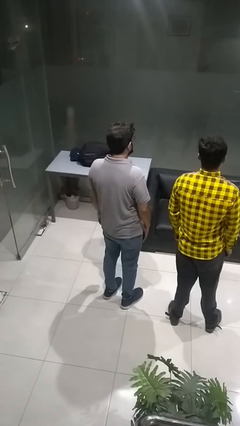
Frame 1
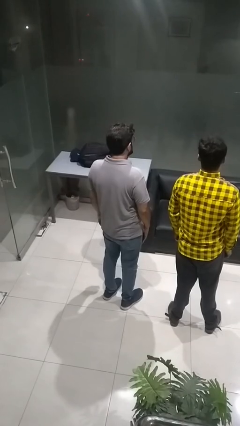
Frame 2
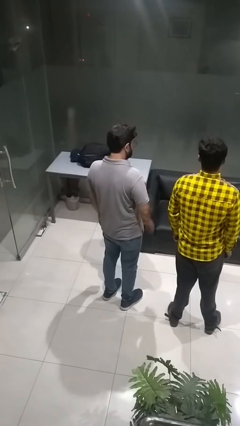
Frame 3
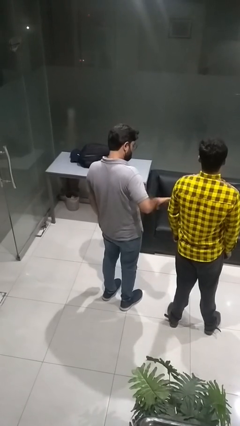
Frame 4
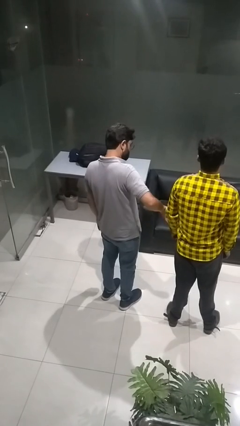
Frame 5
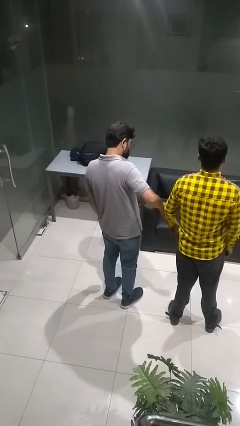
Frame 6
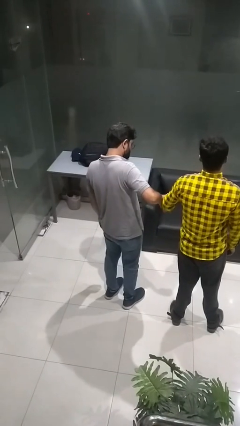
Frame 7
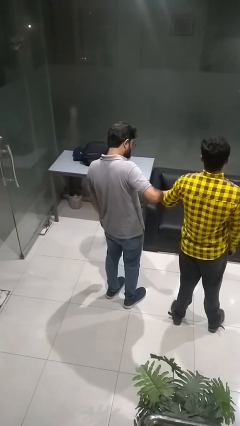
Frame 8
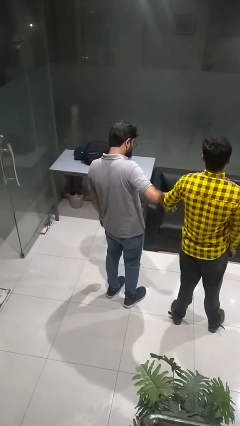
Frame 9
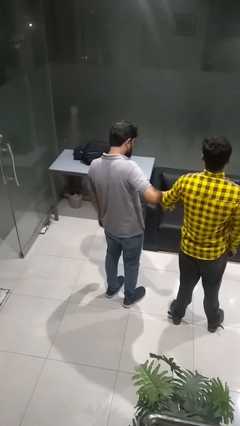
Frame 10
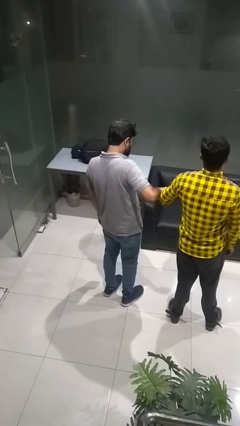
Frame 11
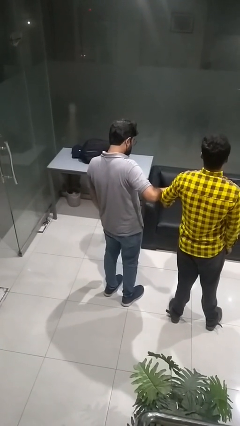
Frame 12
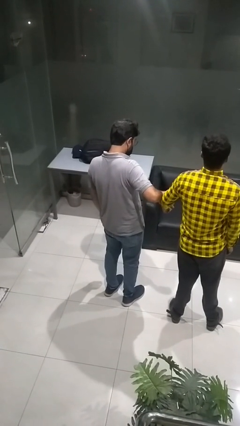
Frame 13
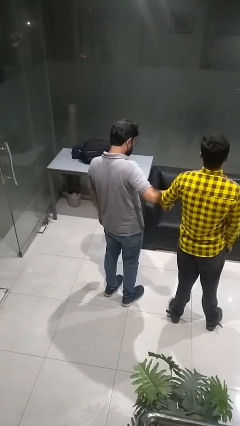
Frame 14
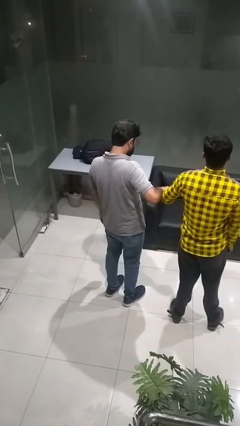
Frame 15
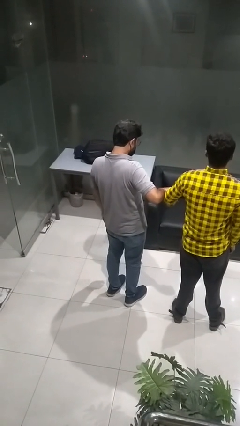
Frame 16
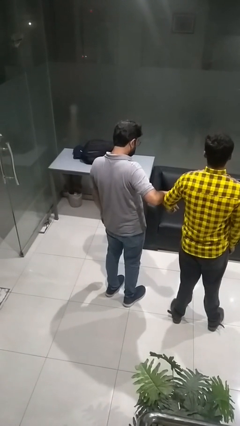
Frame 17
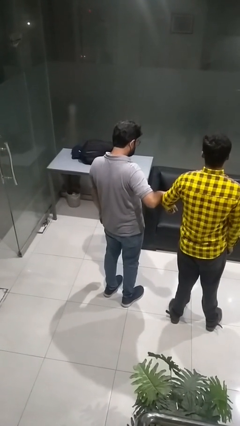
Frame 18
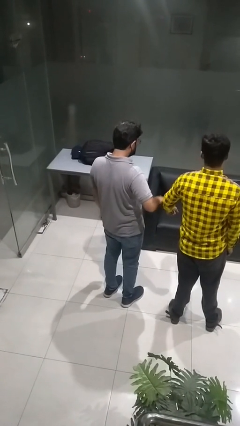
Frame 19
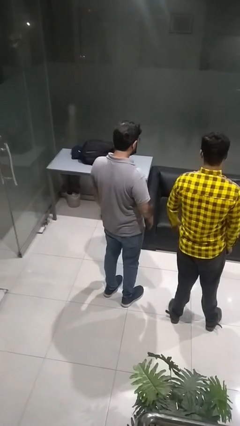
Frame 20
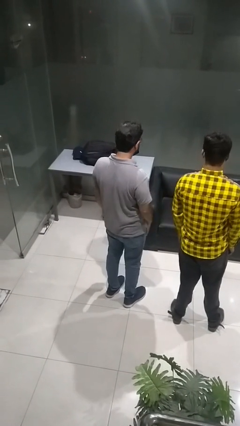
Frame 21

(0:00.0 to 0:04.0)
person grabs person by forearm

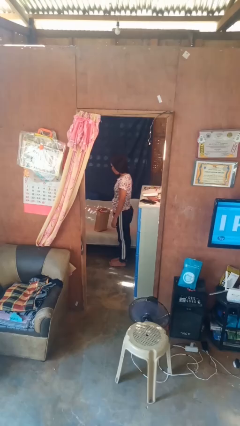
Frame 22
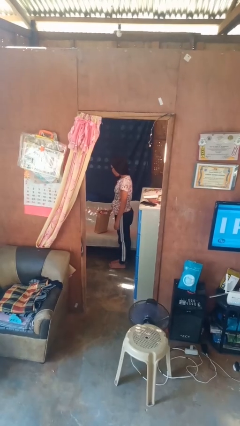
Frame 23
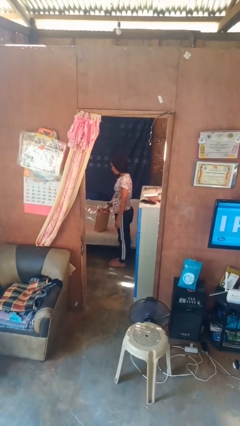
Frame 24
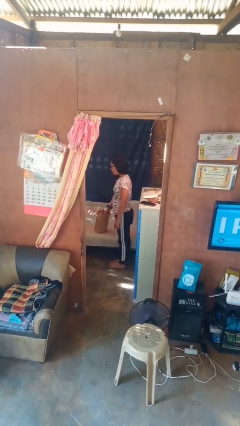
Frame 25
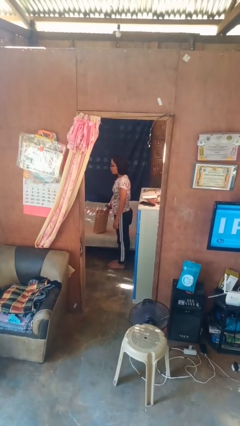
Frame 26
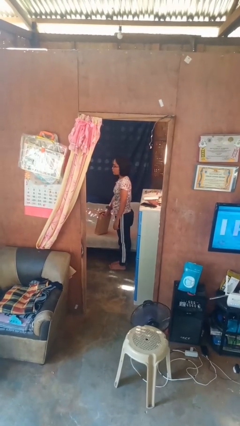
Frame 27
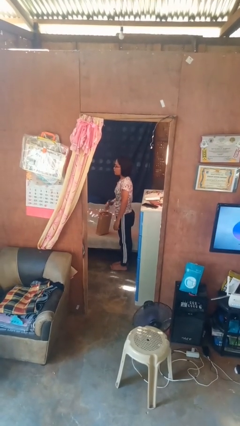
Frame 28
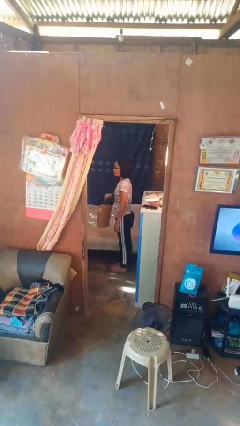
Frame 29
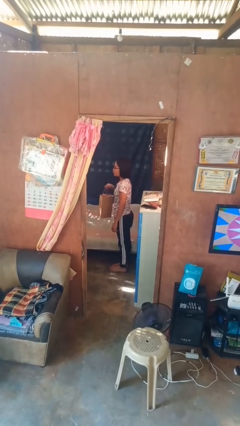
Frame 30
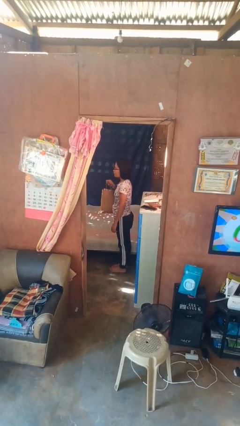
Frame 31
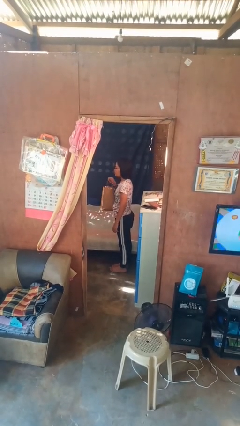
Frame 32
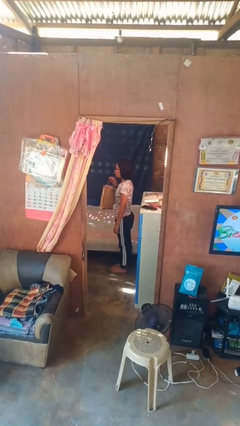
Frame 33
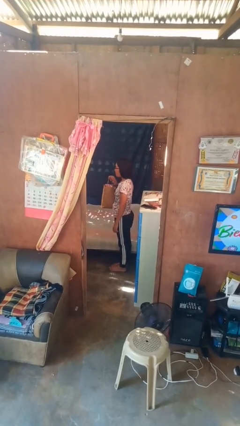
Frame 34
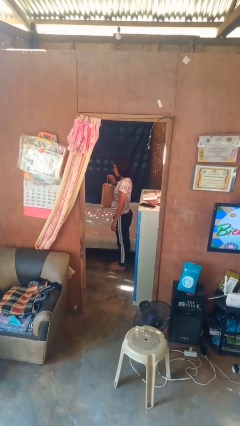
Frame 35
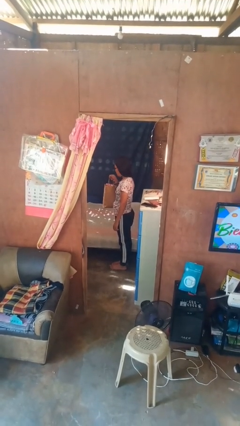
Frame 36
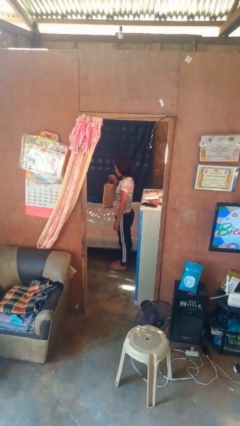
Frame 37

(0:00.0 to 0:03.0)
person picks up object from bed

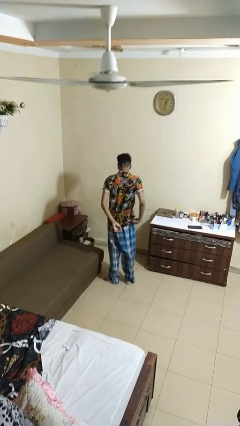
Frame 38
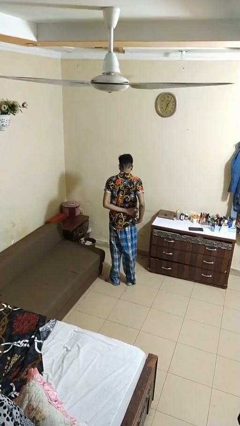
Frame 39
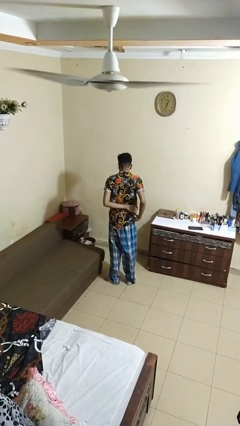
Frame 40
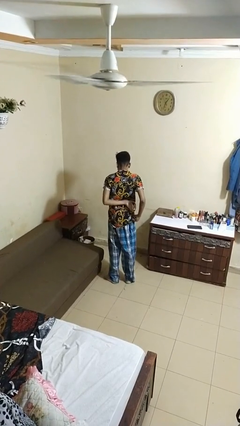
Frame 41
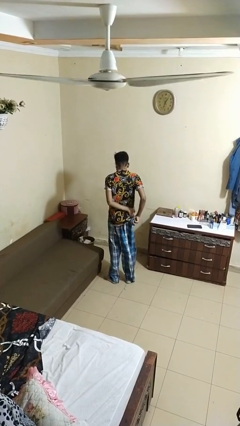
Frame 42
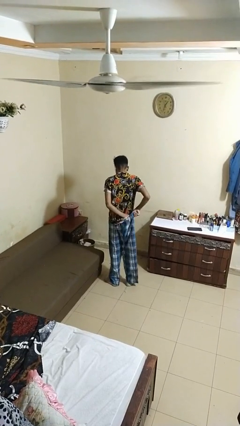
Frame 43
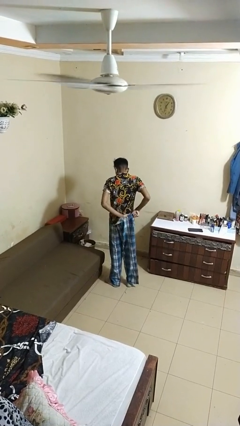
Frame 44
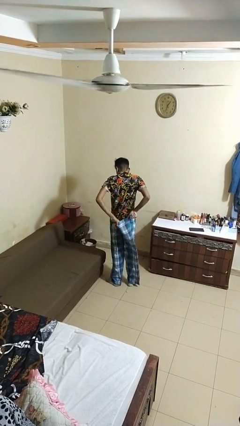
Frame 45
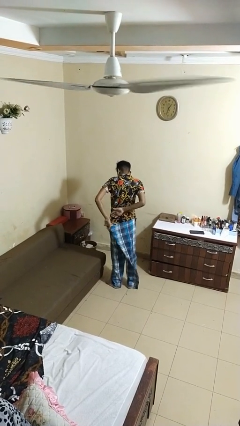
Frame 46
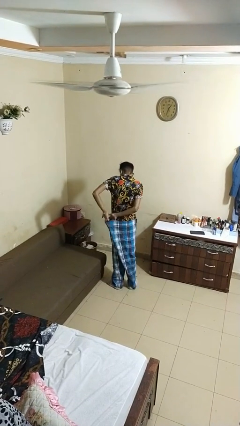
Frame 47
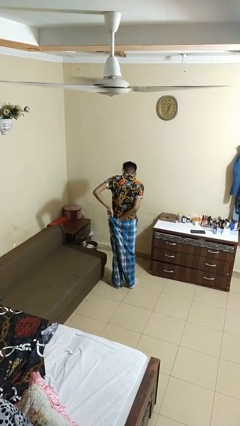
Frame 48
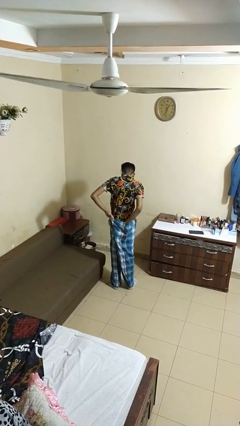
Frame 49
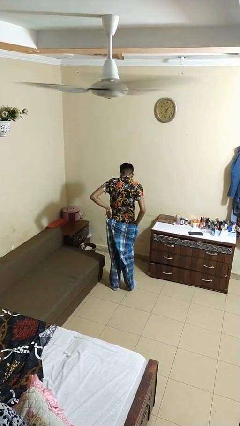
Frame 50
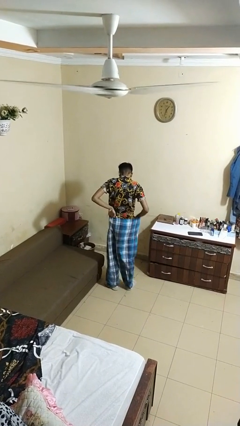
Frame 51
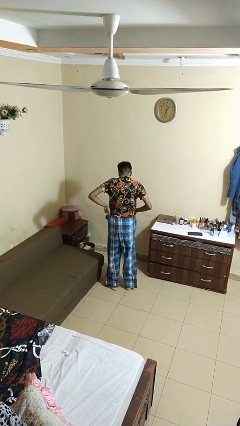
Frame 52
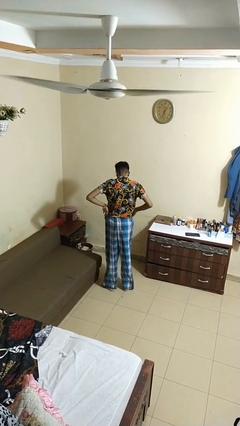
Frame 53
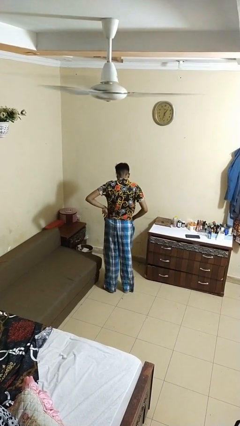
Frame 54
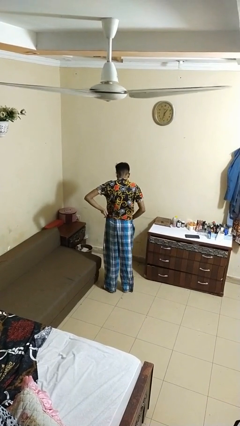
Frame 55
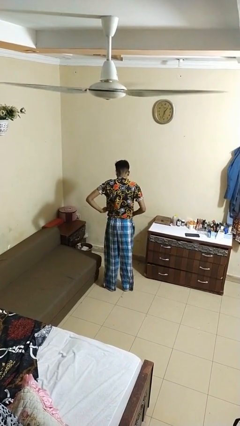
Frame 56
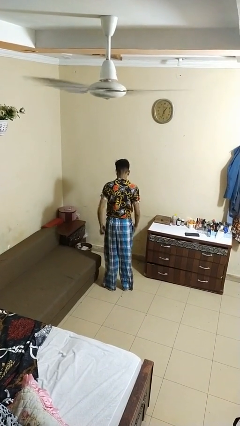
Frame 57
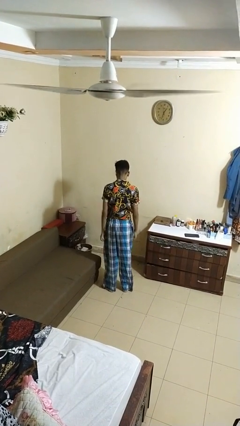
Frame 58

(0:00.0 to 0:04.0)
person tucks in shirt

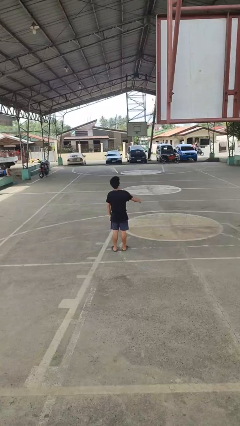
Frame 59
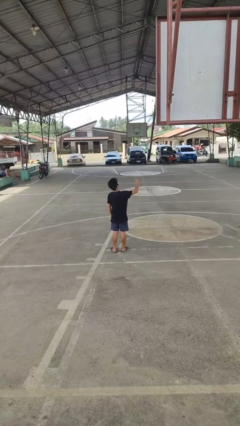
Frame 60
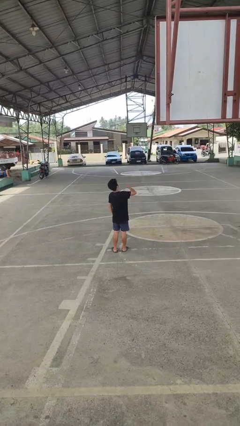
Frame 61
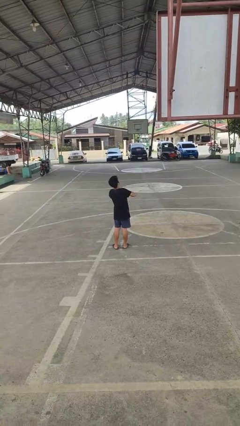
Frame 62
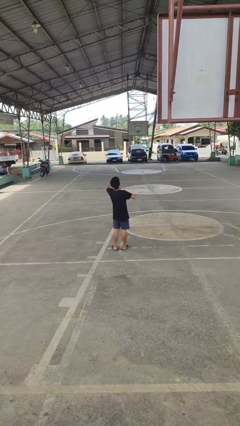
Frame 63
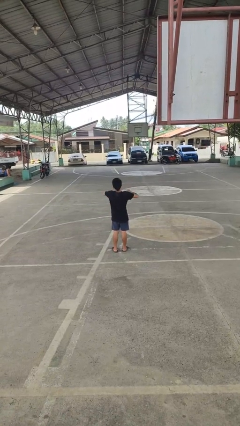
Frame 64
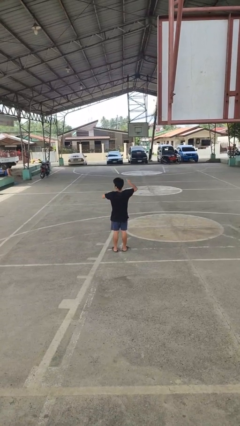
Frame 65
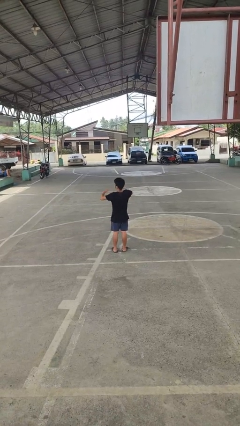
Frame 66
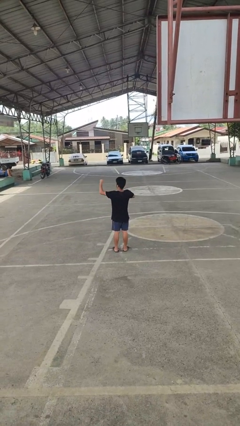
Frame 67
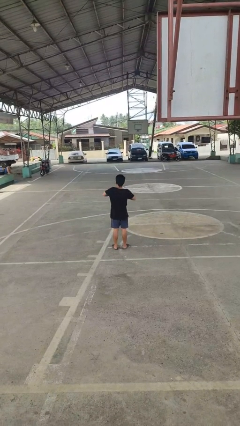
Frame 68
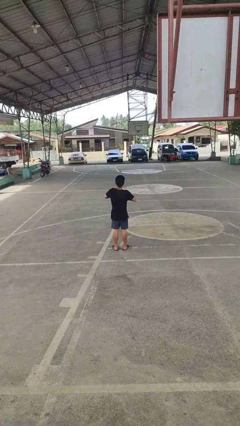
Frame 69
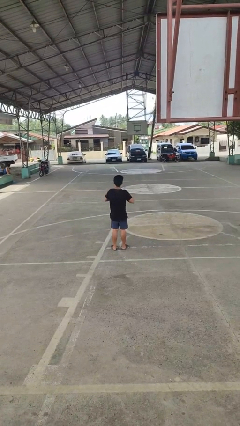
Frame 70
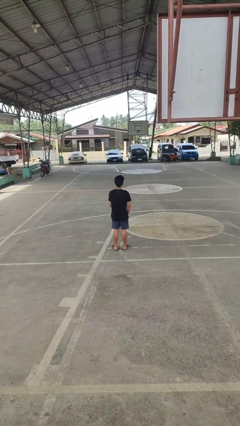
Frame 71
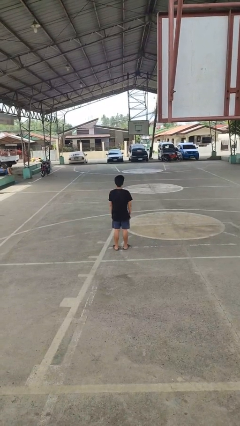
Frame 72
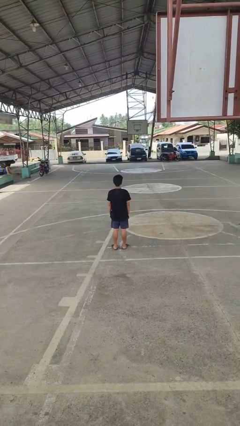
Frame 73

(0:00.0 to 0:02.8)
person drums on chest

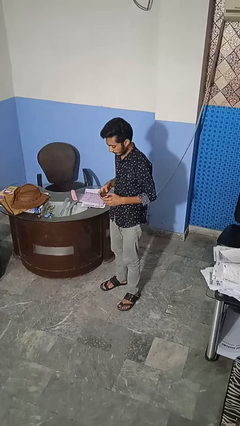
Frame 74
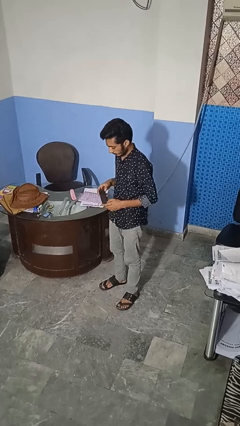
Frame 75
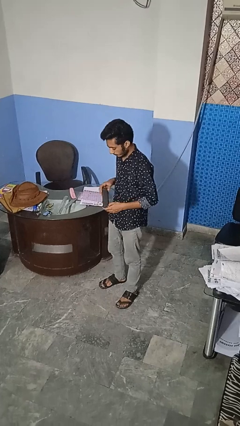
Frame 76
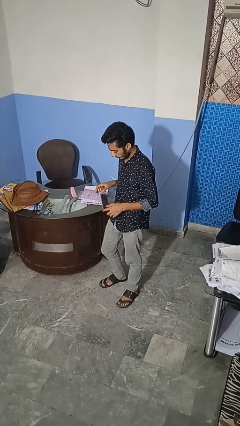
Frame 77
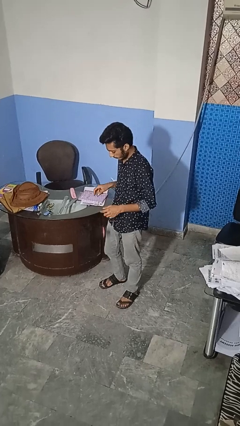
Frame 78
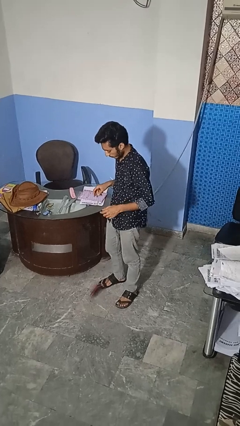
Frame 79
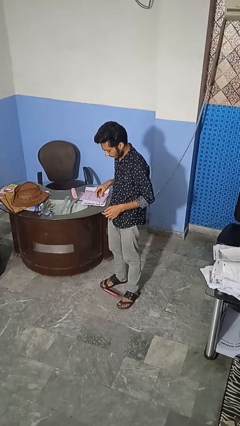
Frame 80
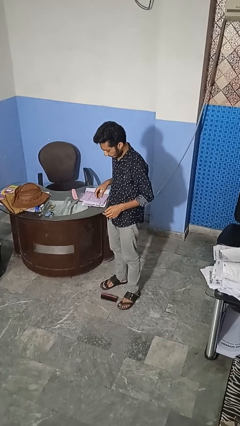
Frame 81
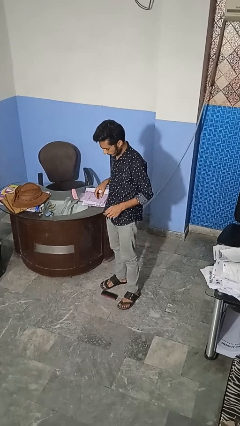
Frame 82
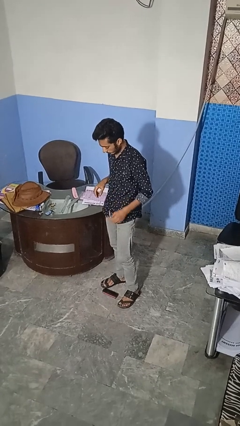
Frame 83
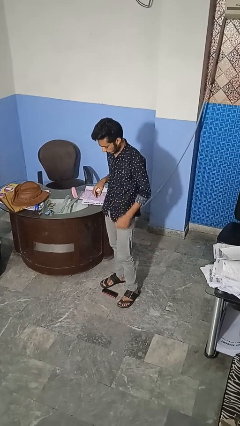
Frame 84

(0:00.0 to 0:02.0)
person drops object

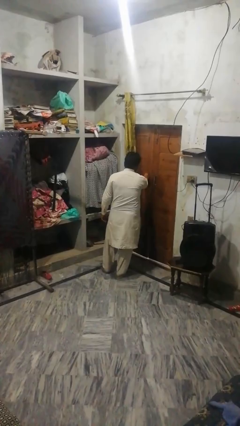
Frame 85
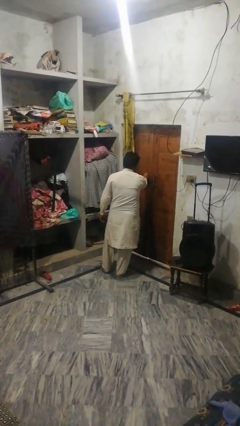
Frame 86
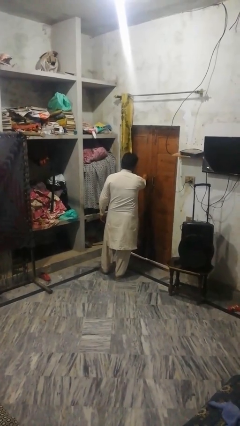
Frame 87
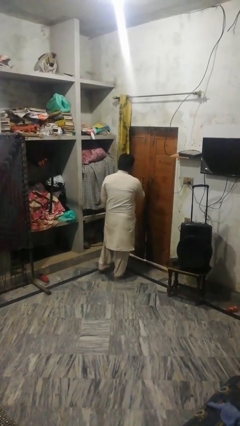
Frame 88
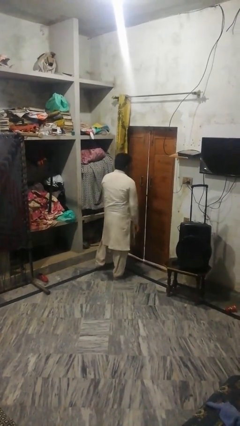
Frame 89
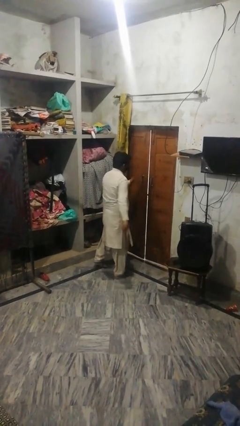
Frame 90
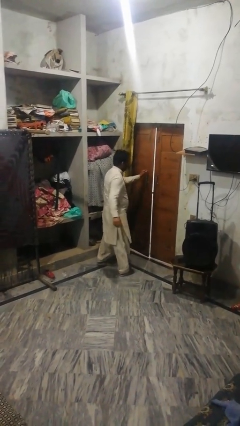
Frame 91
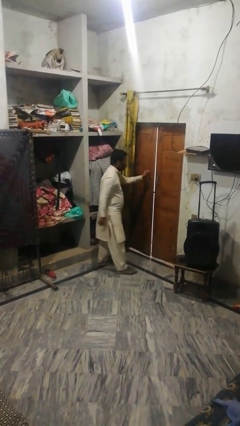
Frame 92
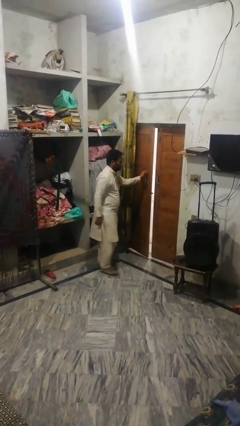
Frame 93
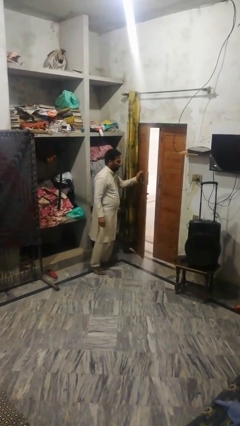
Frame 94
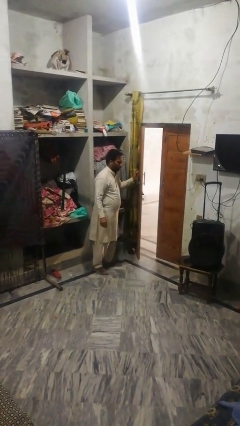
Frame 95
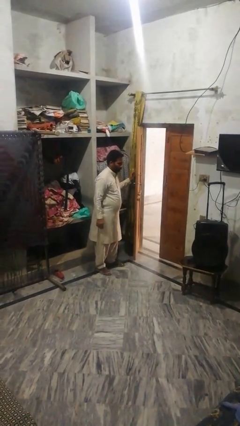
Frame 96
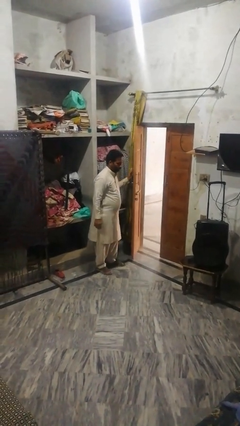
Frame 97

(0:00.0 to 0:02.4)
person opens facility door
